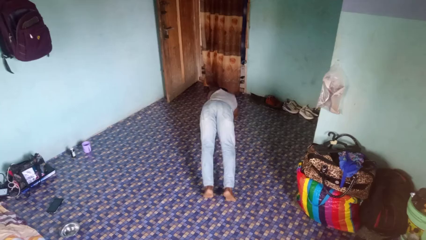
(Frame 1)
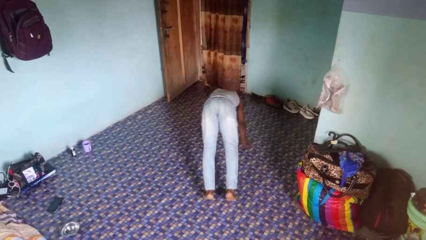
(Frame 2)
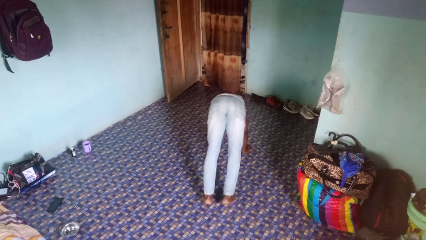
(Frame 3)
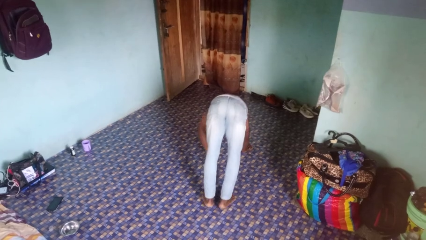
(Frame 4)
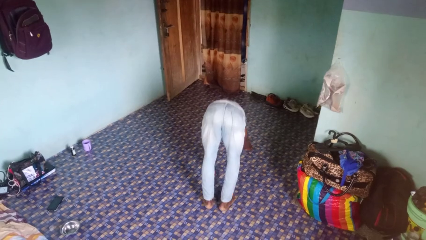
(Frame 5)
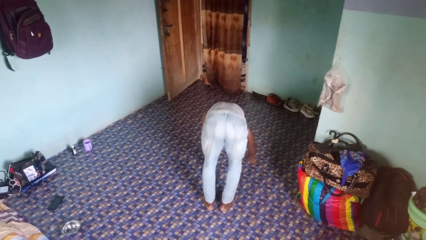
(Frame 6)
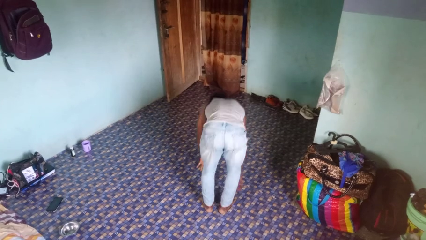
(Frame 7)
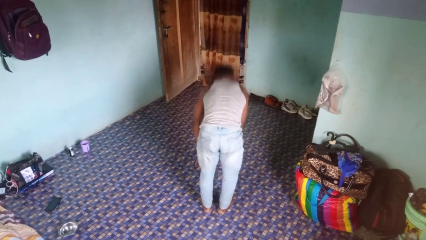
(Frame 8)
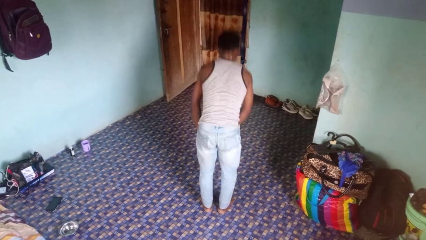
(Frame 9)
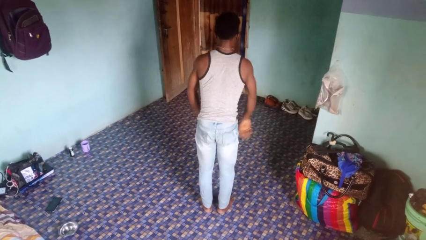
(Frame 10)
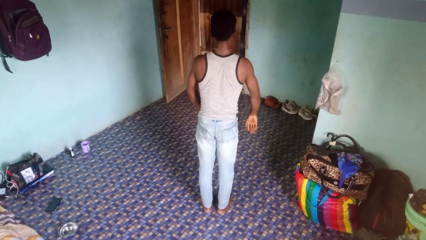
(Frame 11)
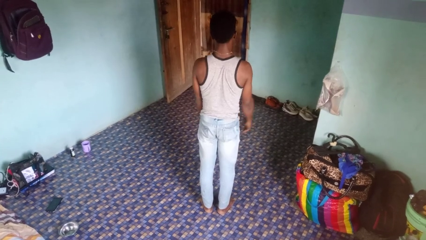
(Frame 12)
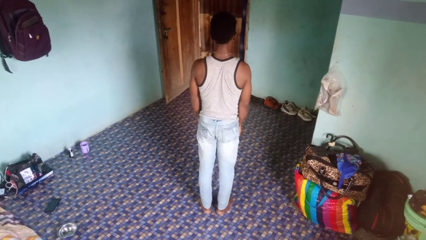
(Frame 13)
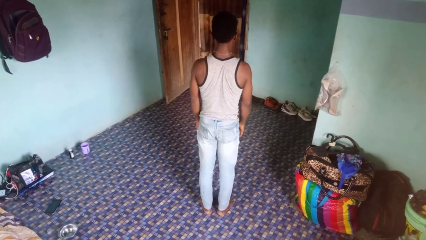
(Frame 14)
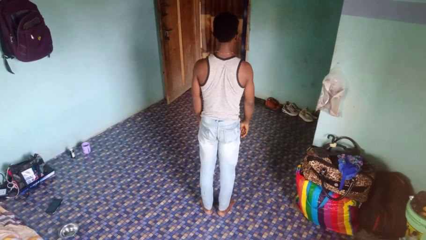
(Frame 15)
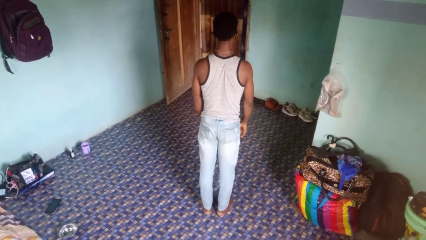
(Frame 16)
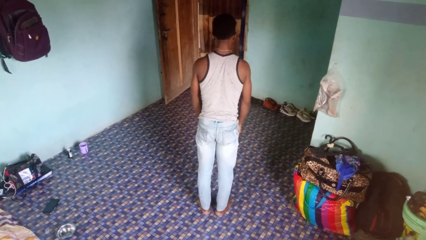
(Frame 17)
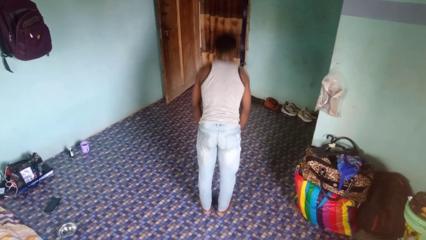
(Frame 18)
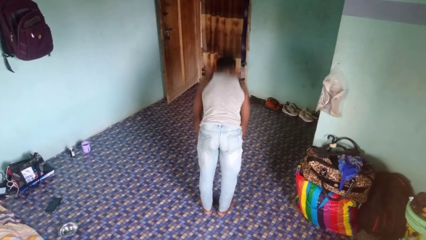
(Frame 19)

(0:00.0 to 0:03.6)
person stands up from floor

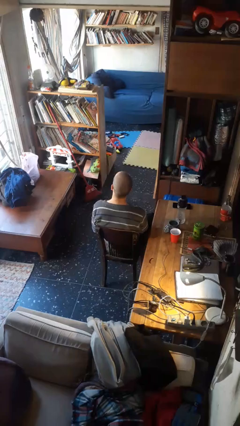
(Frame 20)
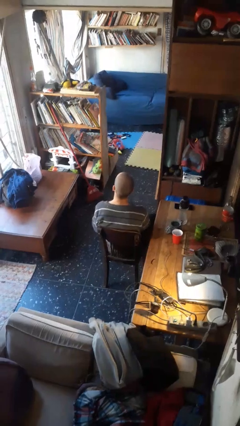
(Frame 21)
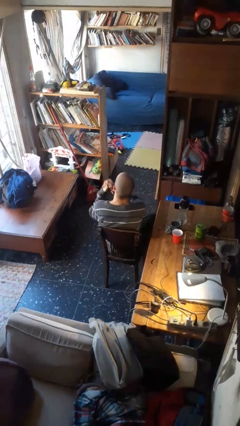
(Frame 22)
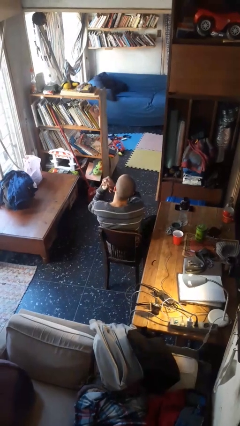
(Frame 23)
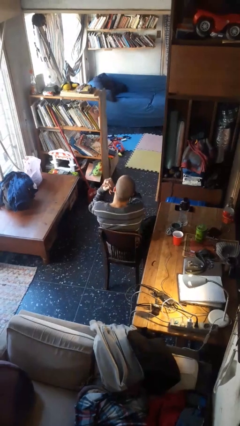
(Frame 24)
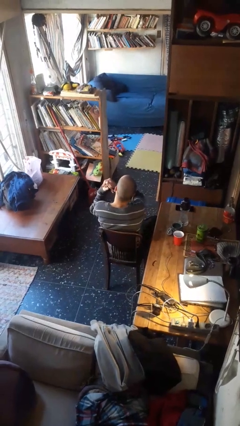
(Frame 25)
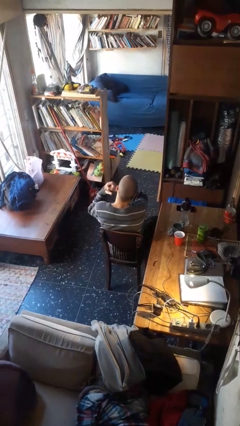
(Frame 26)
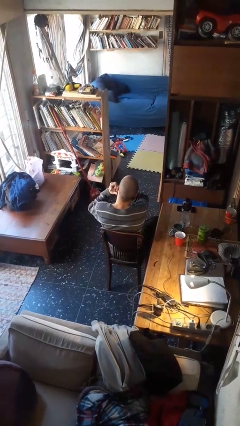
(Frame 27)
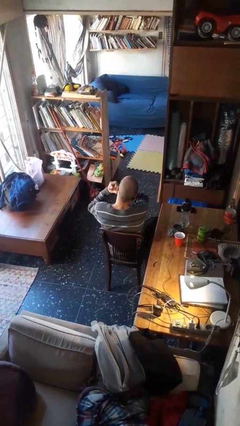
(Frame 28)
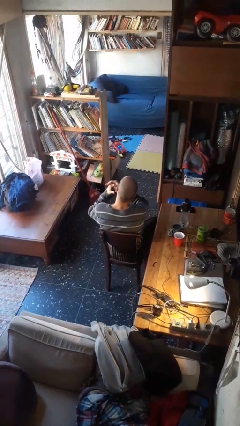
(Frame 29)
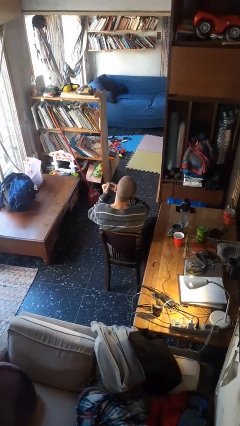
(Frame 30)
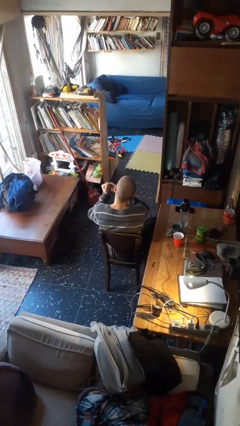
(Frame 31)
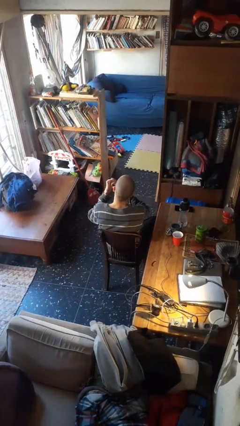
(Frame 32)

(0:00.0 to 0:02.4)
person snaps fingers

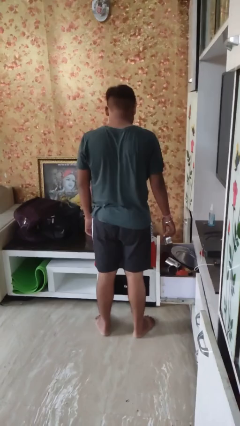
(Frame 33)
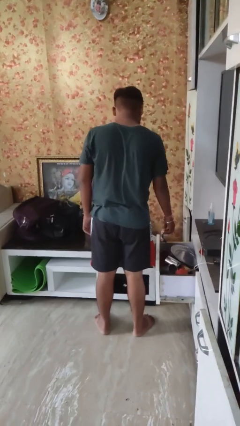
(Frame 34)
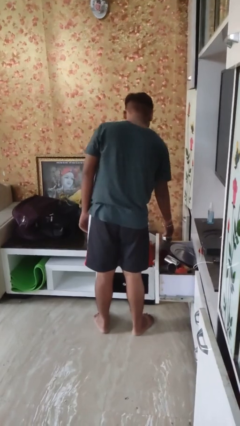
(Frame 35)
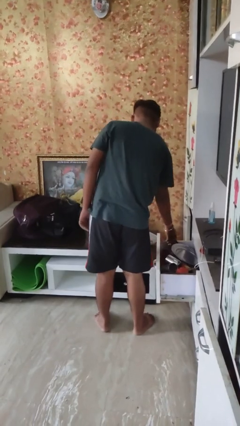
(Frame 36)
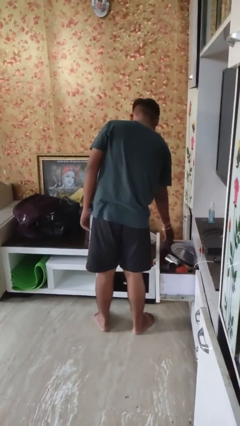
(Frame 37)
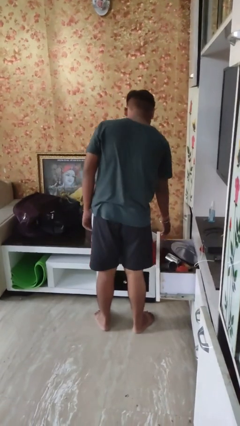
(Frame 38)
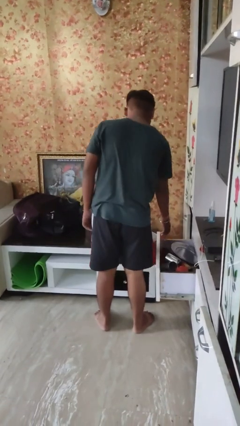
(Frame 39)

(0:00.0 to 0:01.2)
person puts object into kitchen drawer

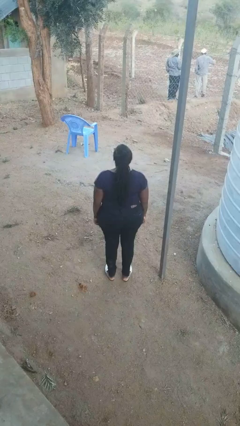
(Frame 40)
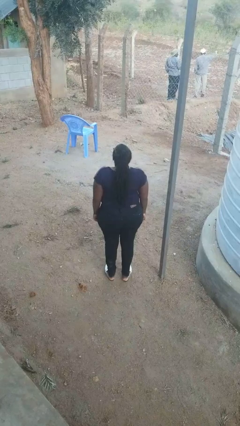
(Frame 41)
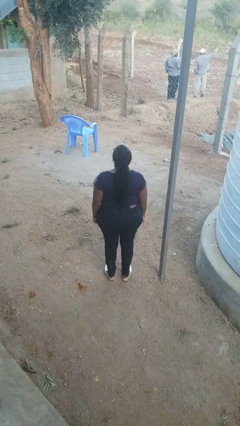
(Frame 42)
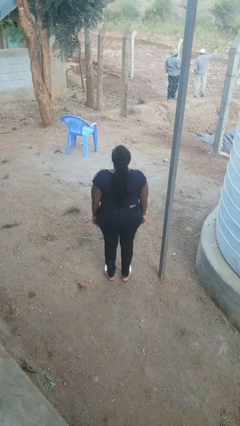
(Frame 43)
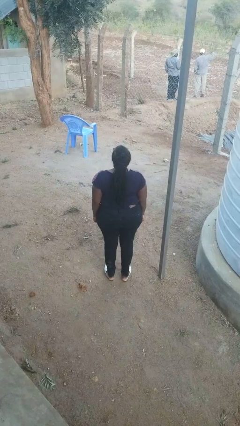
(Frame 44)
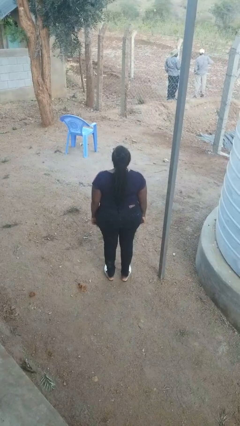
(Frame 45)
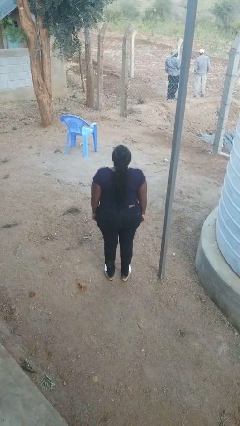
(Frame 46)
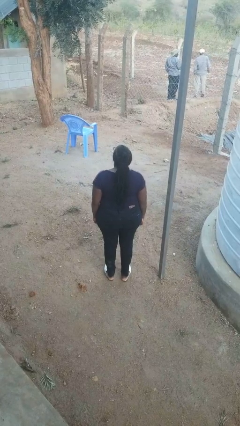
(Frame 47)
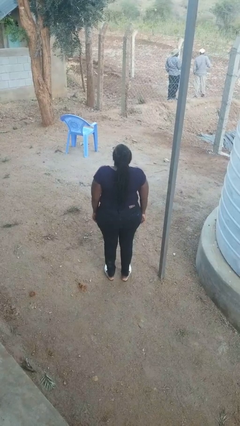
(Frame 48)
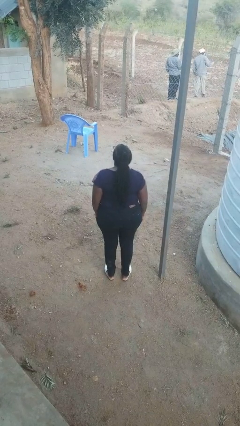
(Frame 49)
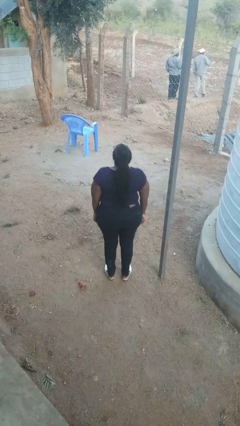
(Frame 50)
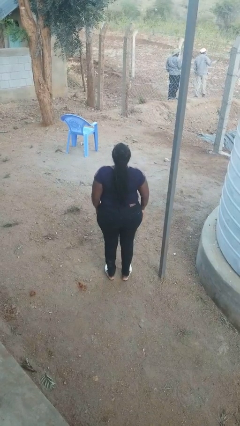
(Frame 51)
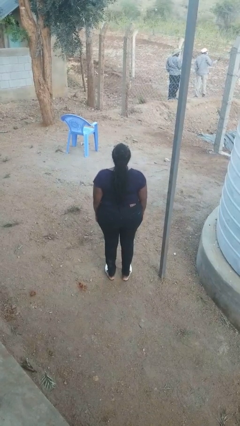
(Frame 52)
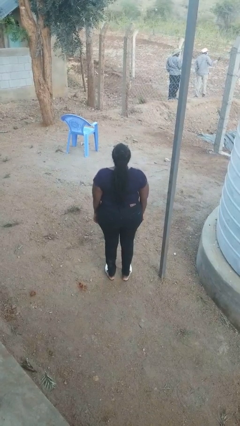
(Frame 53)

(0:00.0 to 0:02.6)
person shrugs

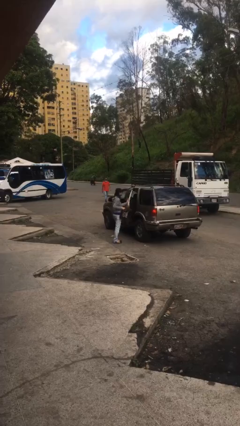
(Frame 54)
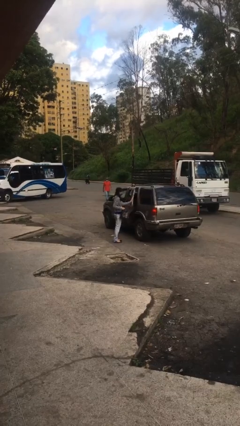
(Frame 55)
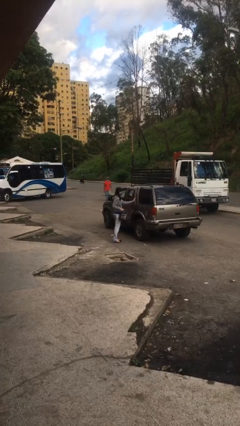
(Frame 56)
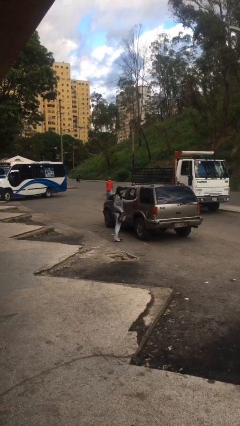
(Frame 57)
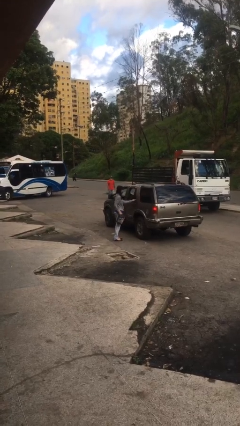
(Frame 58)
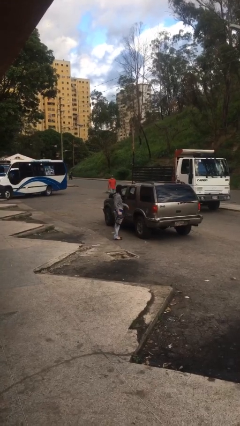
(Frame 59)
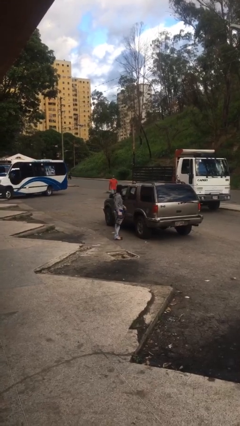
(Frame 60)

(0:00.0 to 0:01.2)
person closes car door

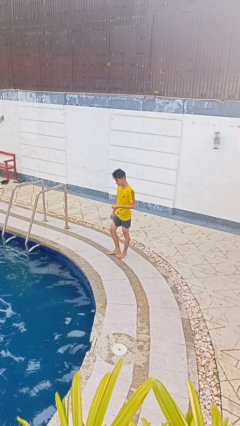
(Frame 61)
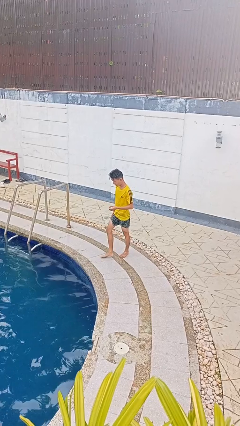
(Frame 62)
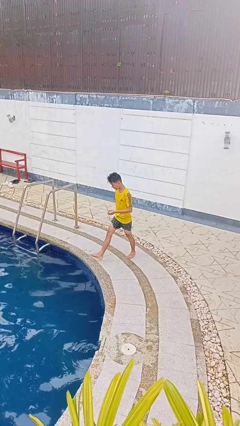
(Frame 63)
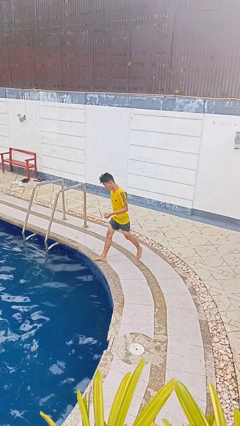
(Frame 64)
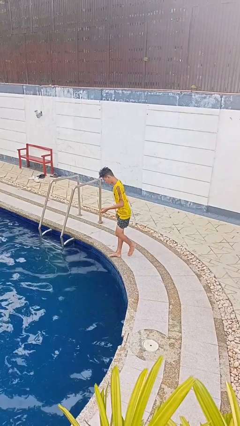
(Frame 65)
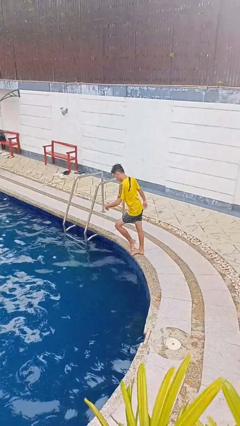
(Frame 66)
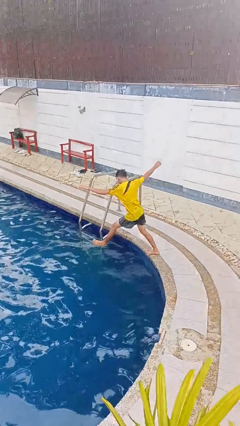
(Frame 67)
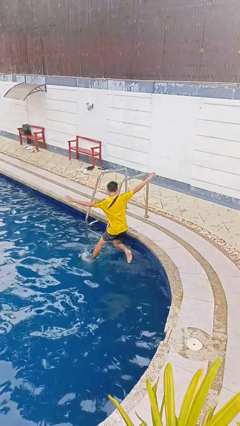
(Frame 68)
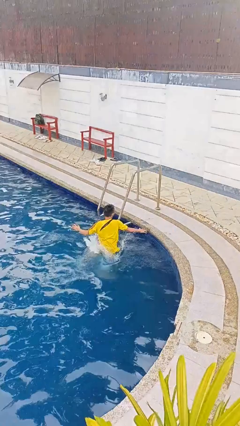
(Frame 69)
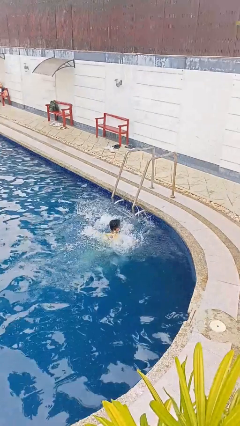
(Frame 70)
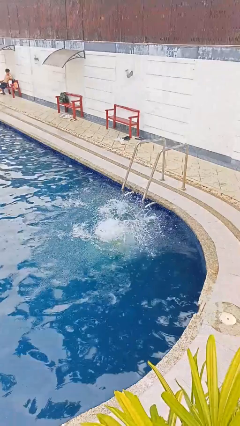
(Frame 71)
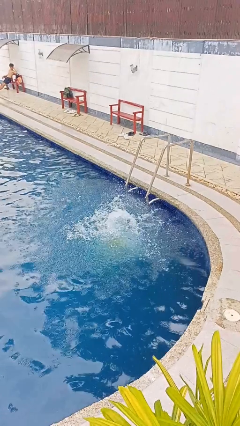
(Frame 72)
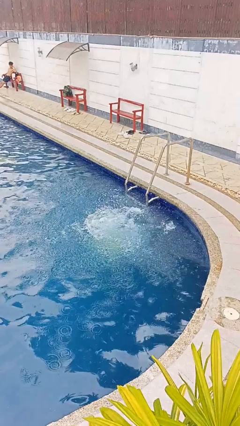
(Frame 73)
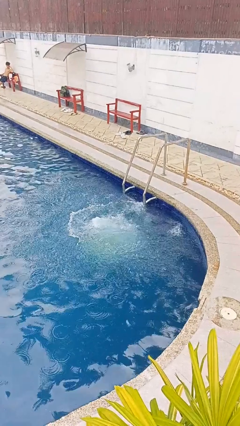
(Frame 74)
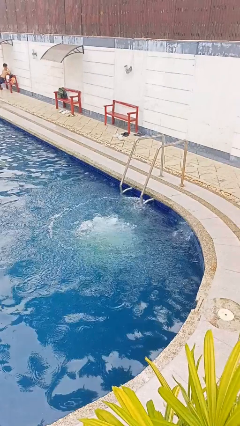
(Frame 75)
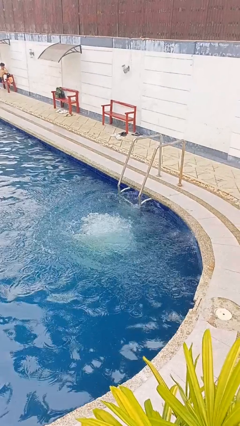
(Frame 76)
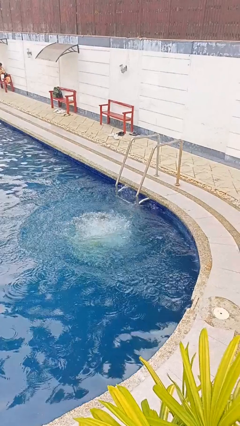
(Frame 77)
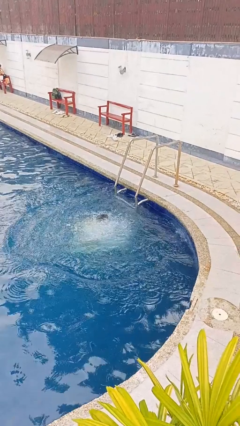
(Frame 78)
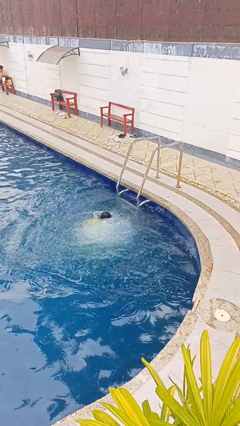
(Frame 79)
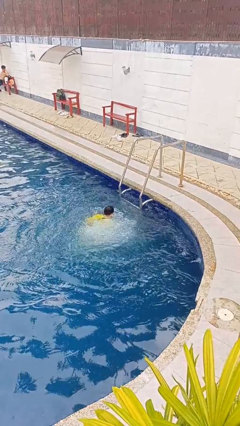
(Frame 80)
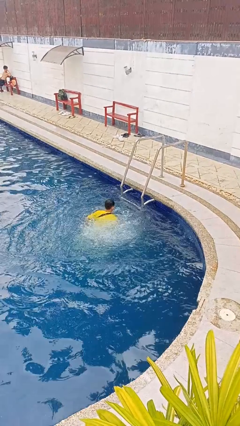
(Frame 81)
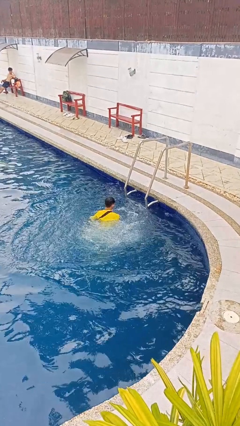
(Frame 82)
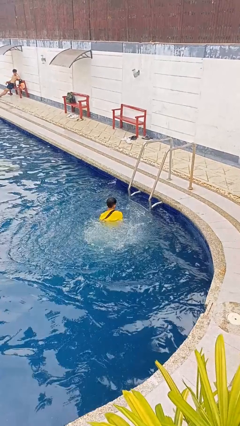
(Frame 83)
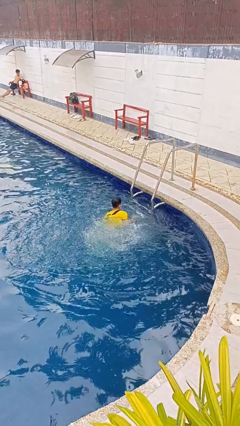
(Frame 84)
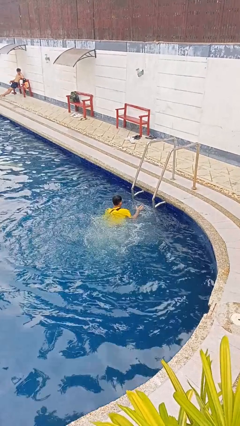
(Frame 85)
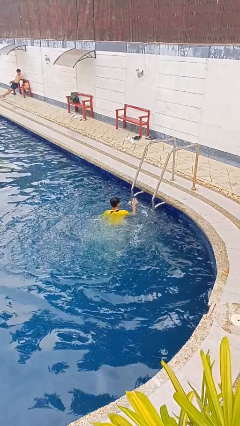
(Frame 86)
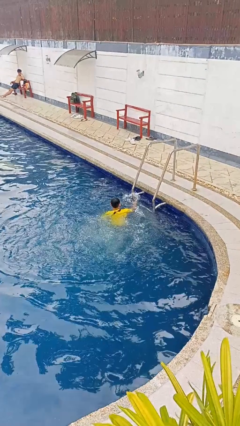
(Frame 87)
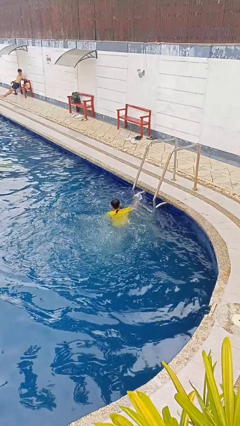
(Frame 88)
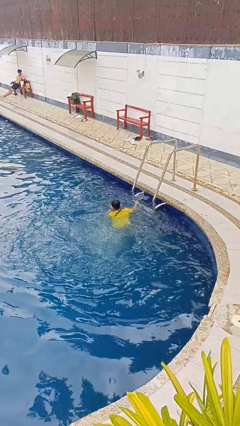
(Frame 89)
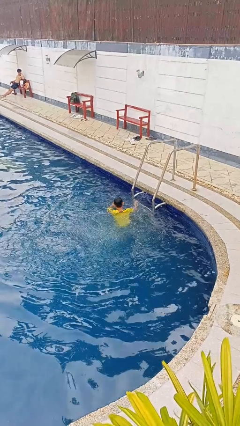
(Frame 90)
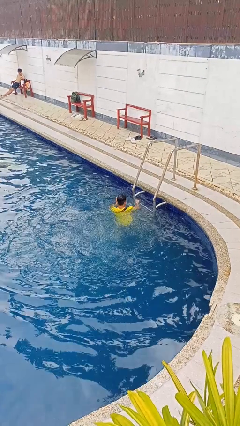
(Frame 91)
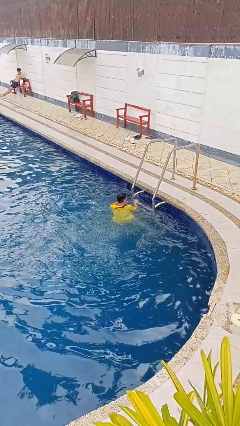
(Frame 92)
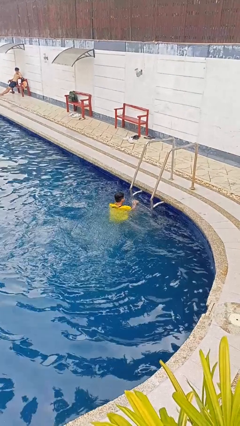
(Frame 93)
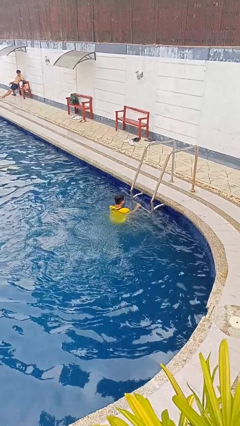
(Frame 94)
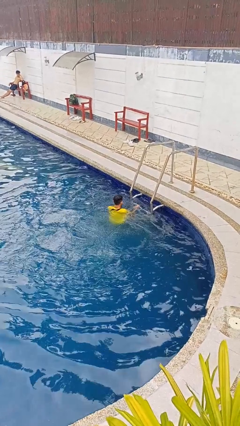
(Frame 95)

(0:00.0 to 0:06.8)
person falls into pool
